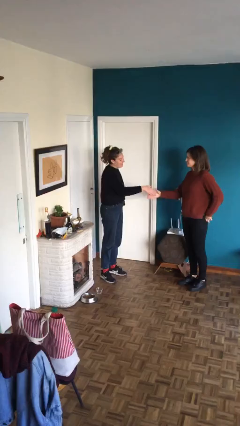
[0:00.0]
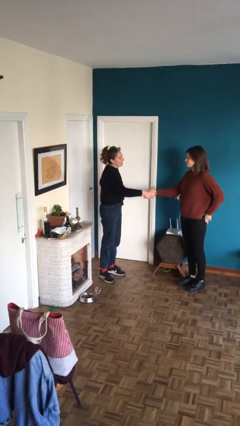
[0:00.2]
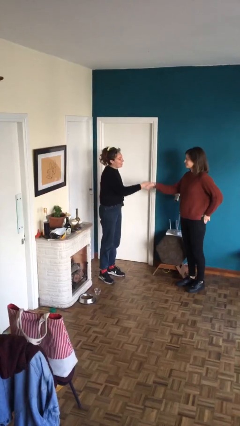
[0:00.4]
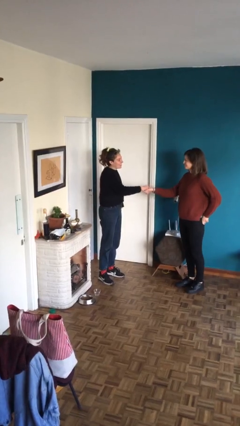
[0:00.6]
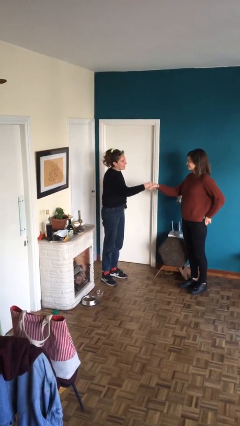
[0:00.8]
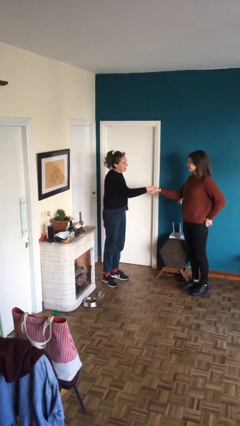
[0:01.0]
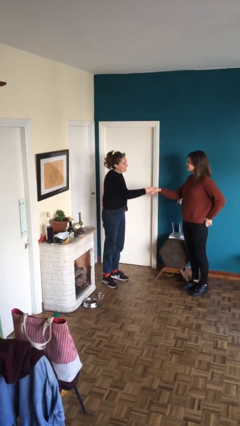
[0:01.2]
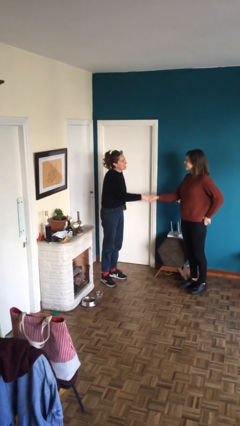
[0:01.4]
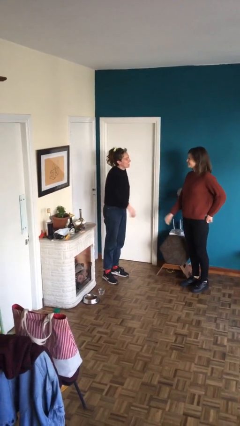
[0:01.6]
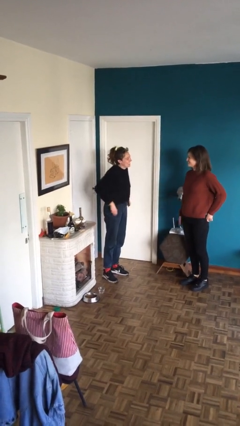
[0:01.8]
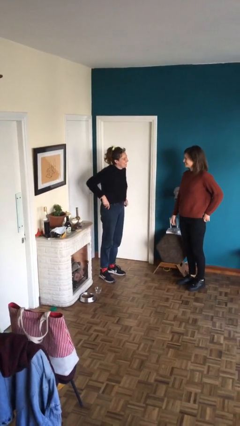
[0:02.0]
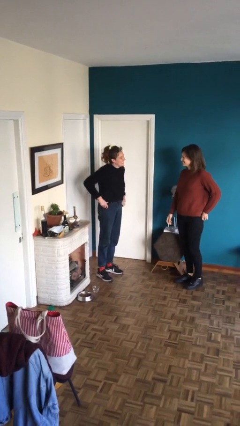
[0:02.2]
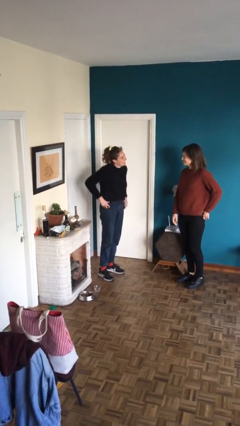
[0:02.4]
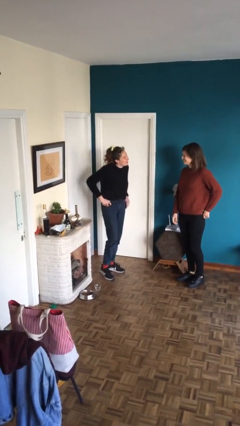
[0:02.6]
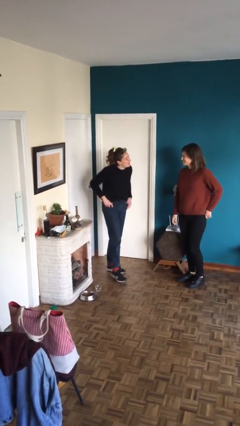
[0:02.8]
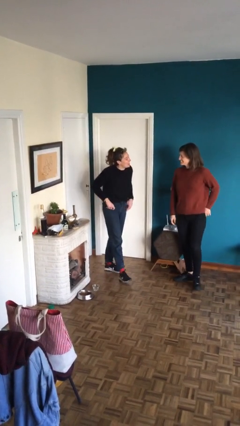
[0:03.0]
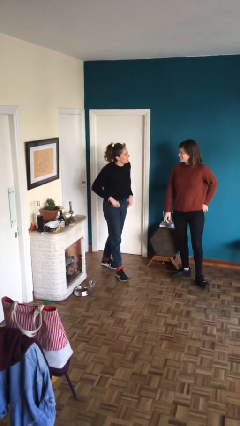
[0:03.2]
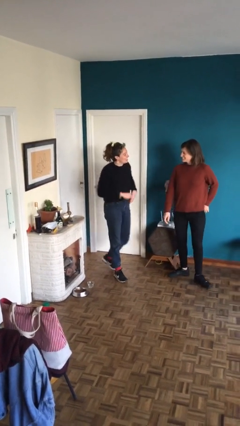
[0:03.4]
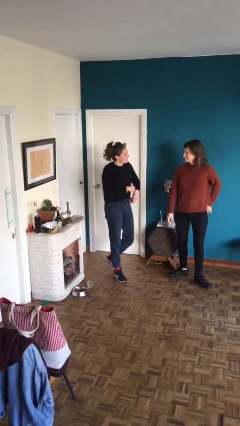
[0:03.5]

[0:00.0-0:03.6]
person shakes hand

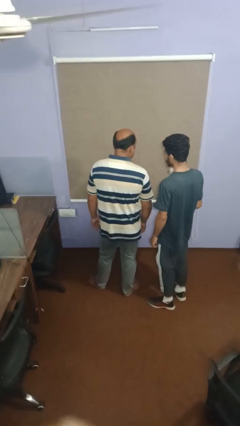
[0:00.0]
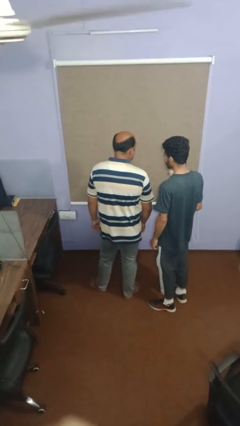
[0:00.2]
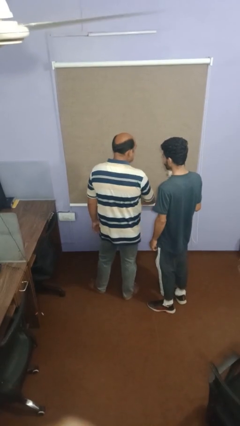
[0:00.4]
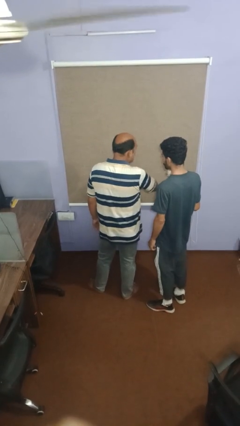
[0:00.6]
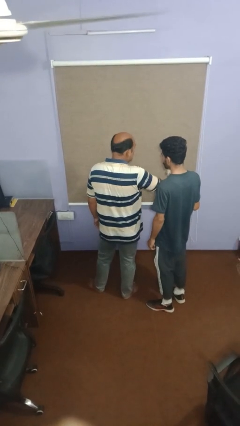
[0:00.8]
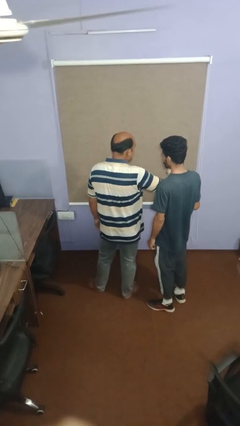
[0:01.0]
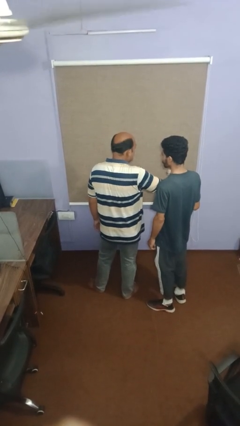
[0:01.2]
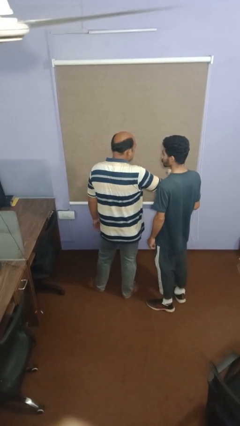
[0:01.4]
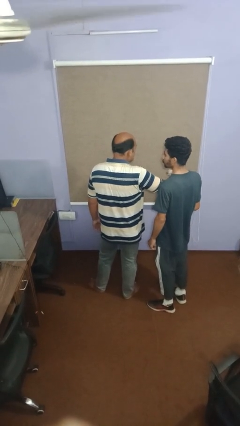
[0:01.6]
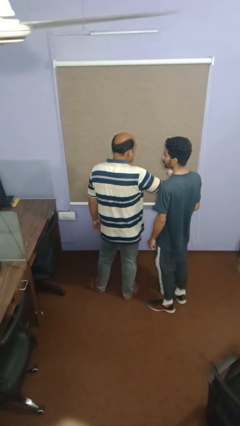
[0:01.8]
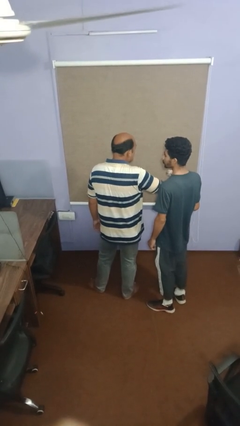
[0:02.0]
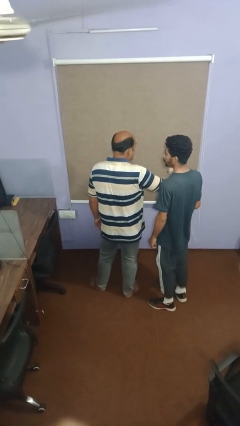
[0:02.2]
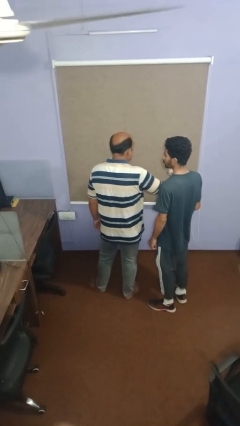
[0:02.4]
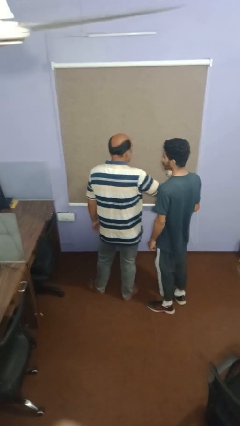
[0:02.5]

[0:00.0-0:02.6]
person nudges person with elbow

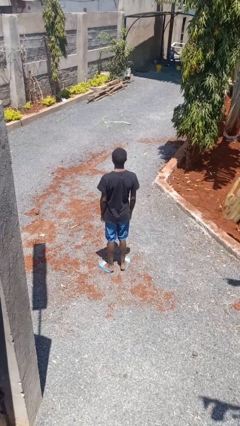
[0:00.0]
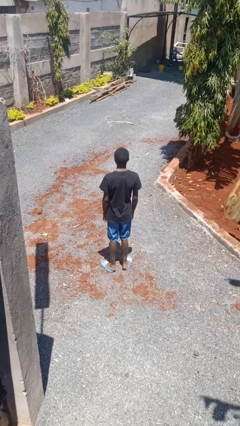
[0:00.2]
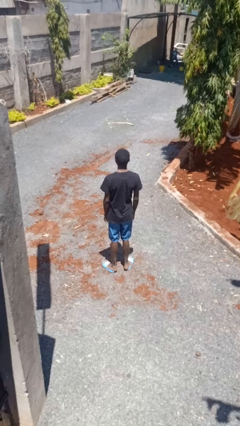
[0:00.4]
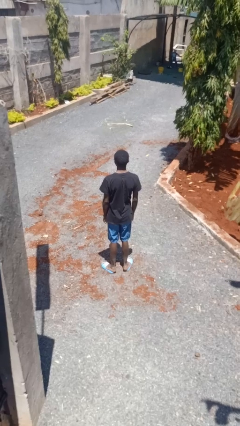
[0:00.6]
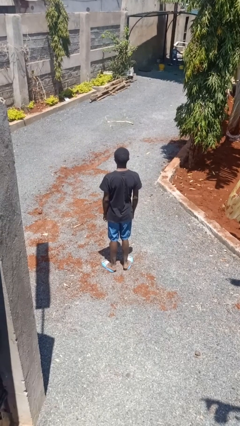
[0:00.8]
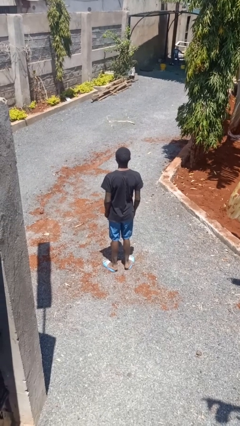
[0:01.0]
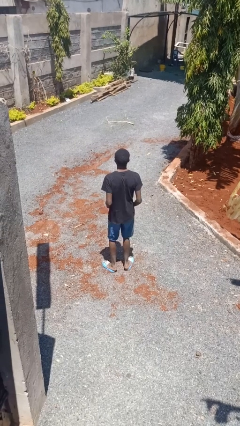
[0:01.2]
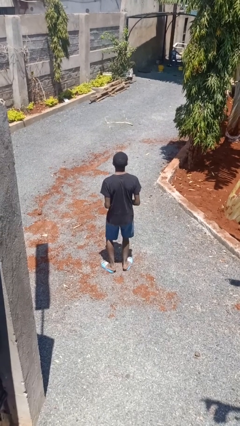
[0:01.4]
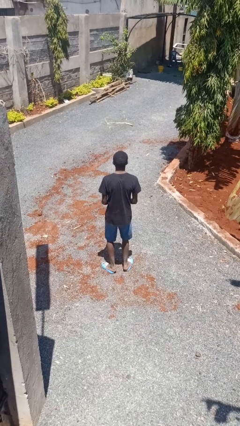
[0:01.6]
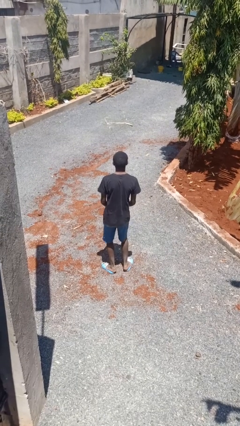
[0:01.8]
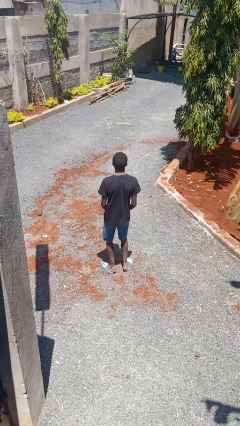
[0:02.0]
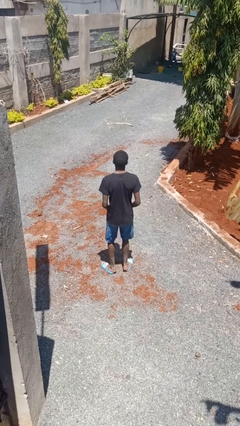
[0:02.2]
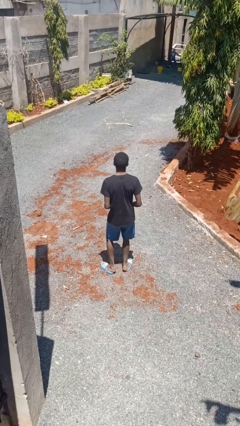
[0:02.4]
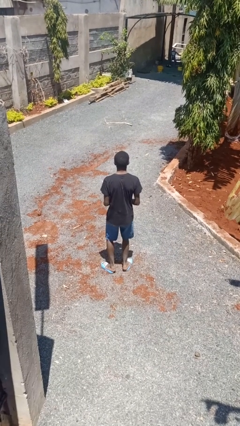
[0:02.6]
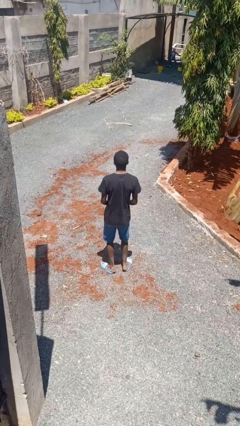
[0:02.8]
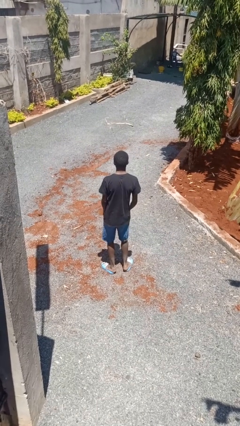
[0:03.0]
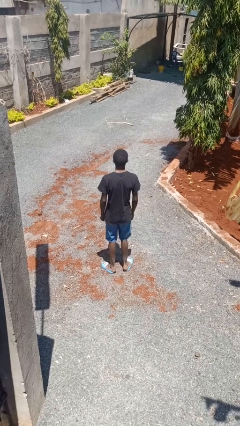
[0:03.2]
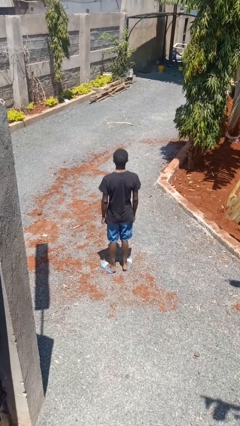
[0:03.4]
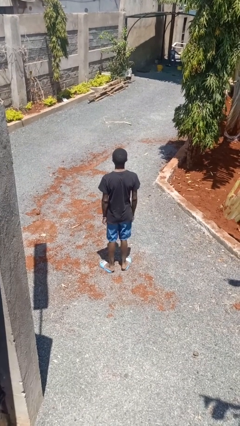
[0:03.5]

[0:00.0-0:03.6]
person dances in place

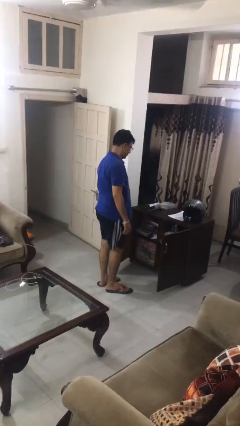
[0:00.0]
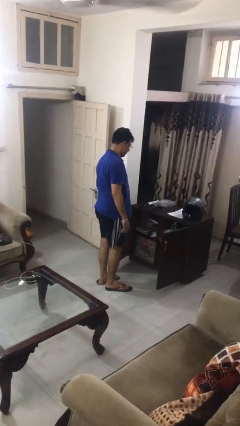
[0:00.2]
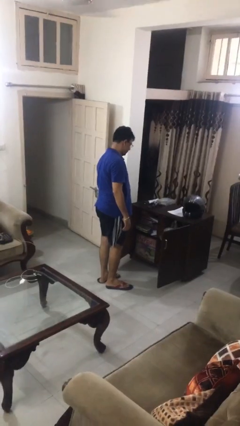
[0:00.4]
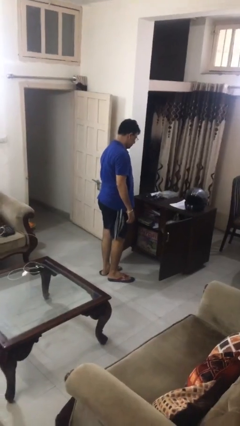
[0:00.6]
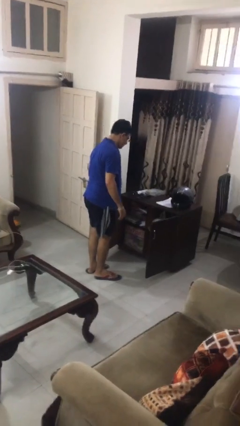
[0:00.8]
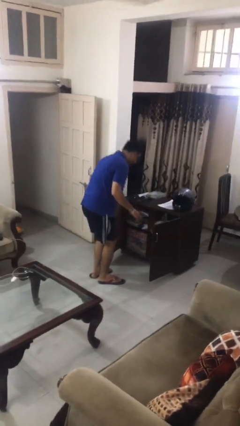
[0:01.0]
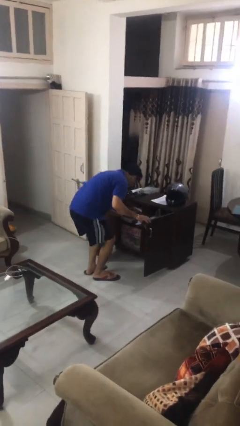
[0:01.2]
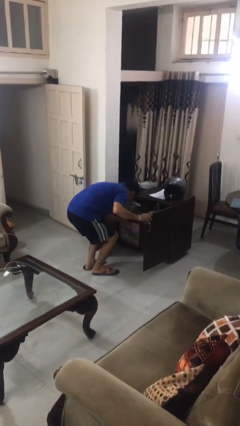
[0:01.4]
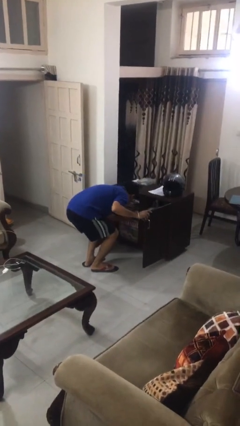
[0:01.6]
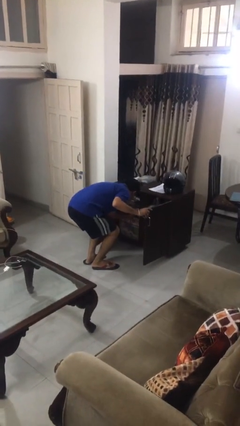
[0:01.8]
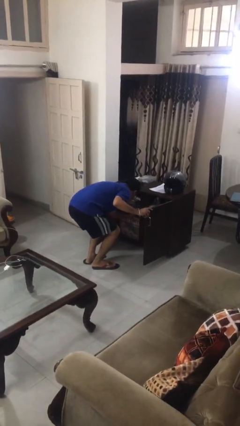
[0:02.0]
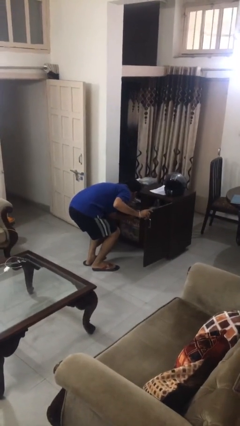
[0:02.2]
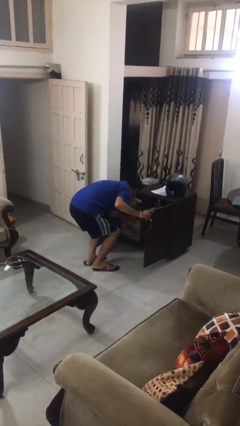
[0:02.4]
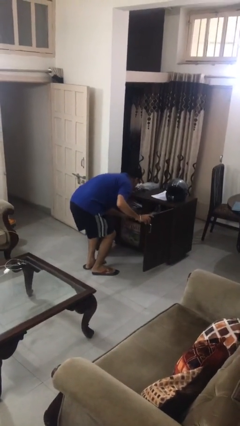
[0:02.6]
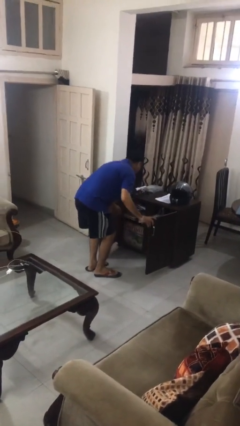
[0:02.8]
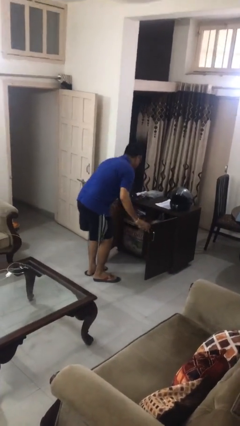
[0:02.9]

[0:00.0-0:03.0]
person searches in cabinet

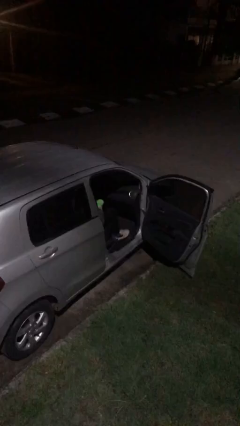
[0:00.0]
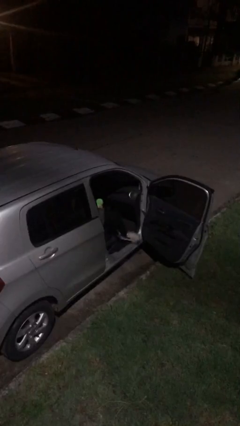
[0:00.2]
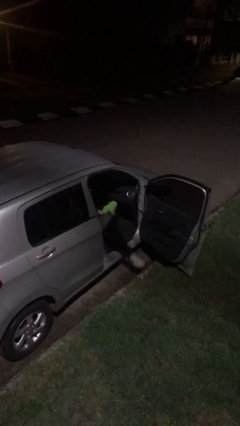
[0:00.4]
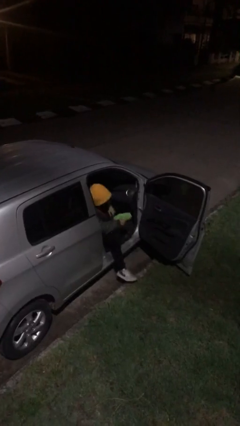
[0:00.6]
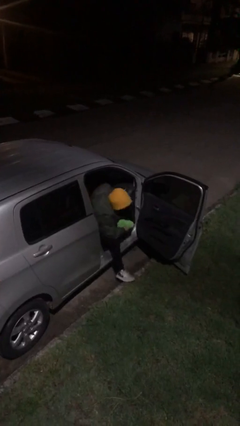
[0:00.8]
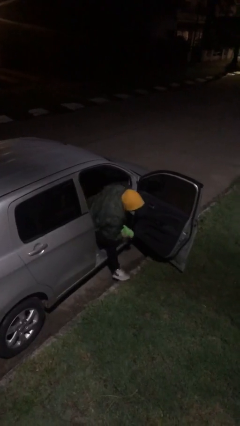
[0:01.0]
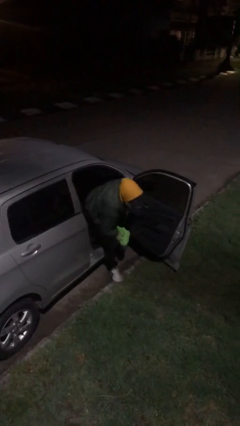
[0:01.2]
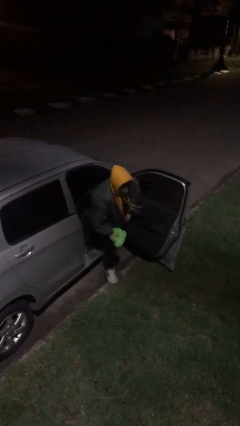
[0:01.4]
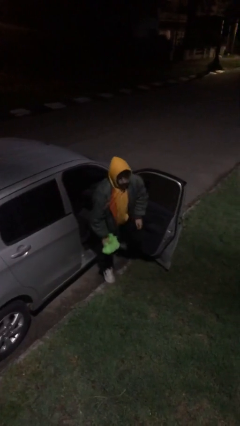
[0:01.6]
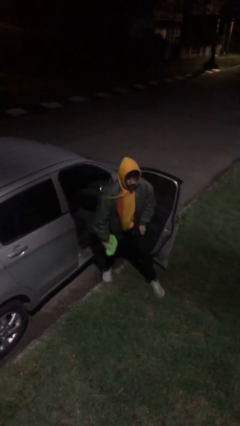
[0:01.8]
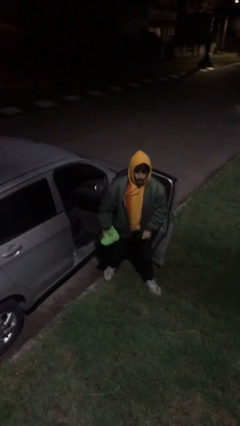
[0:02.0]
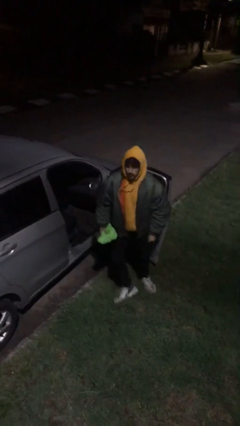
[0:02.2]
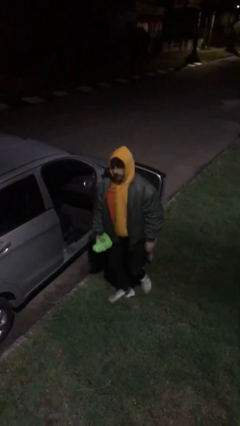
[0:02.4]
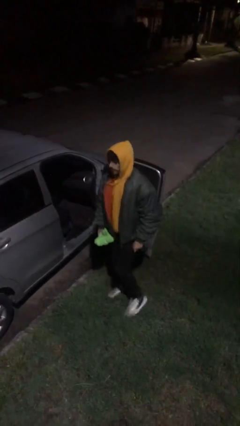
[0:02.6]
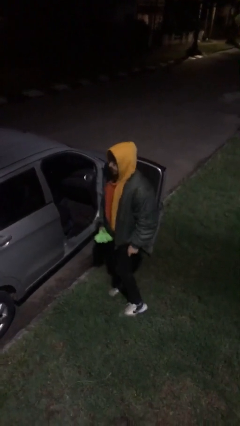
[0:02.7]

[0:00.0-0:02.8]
person exits car

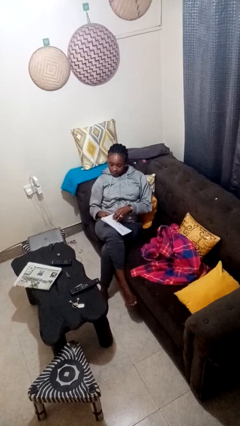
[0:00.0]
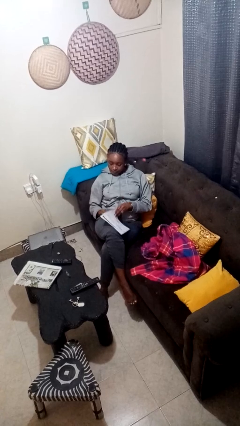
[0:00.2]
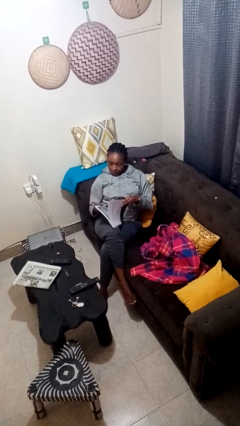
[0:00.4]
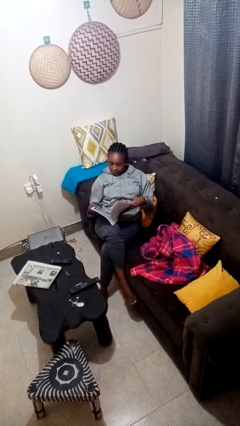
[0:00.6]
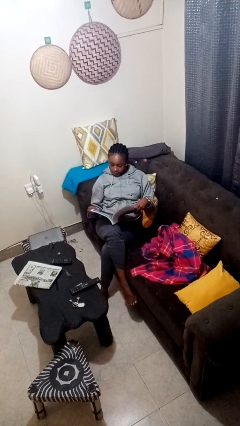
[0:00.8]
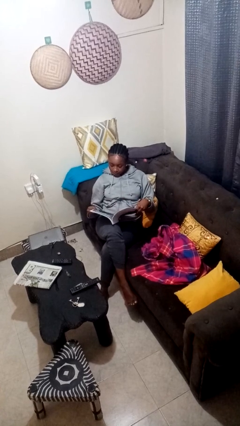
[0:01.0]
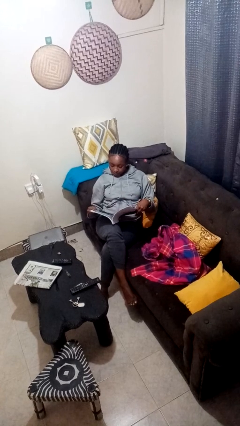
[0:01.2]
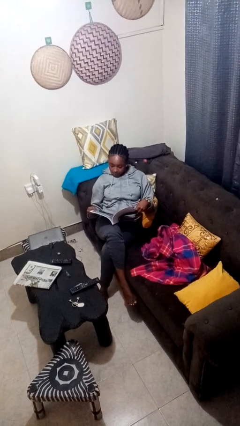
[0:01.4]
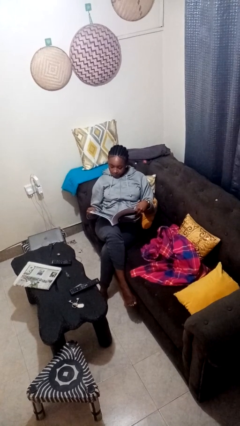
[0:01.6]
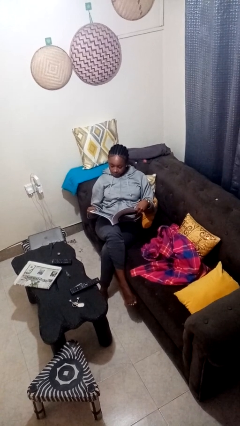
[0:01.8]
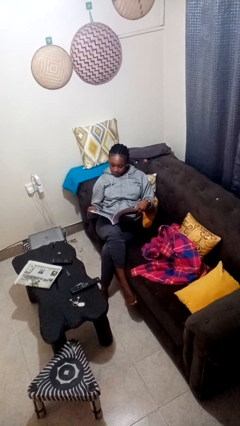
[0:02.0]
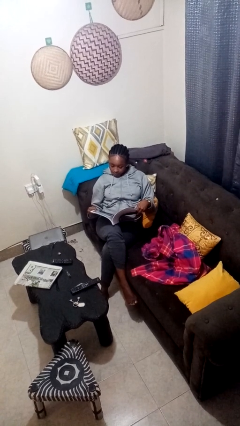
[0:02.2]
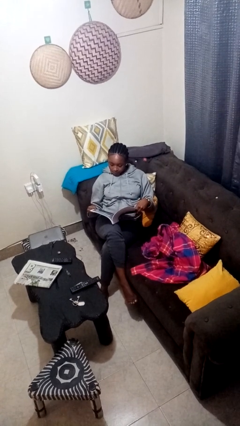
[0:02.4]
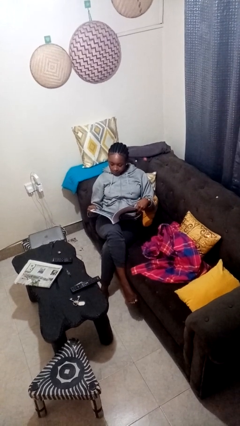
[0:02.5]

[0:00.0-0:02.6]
person reads magazine
